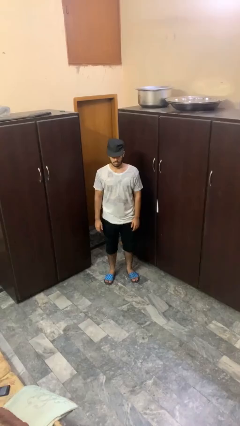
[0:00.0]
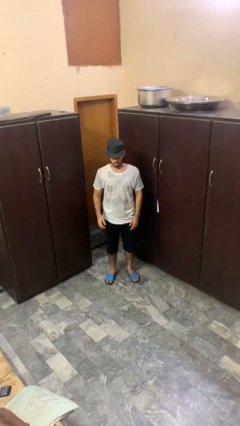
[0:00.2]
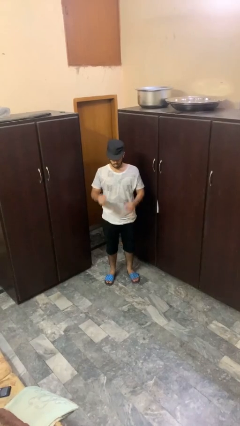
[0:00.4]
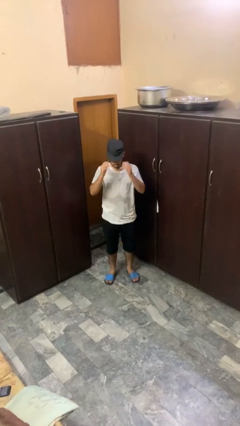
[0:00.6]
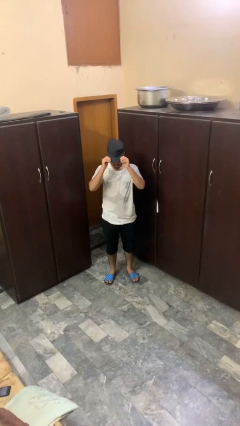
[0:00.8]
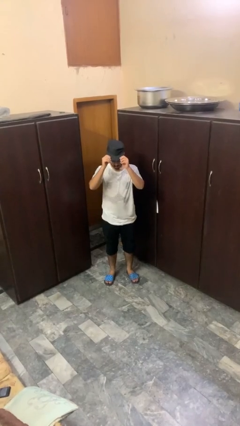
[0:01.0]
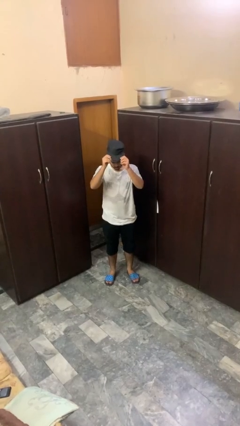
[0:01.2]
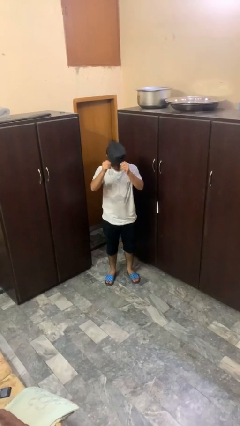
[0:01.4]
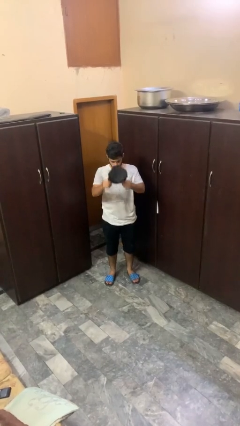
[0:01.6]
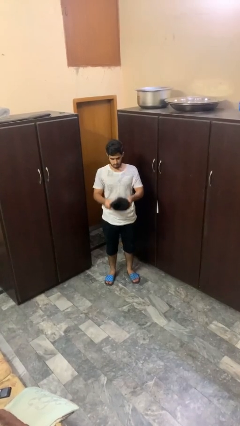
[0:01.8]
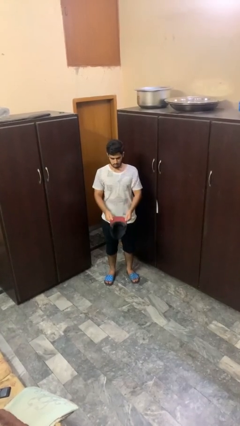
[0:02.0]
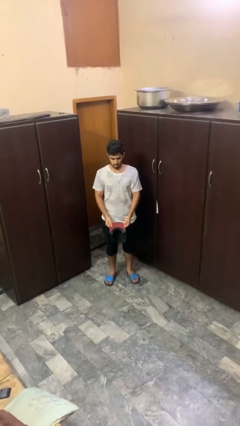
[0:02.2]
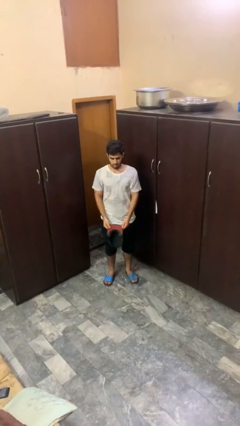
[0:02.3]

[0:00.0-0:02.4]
person takes off hat

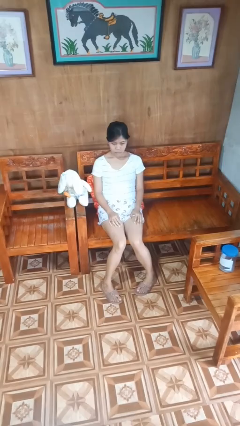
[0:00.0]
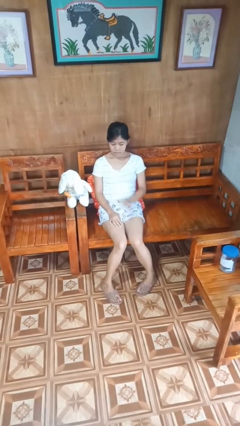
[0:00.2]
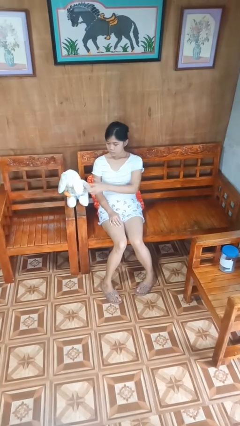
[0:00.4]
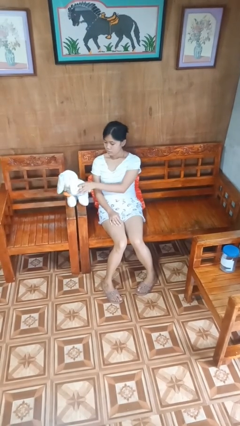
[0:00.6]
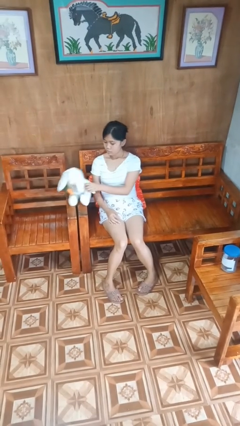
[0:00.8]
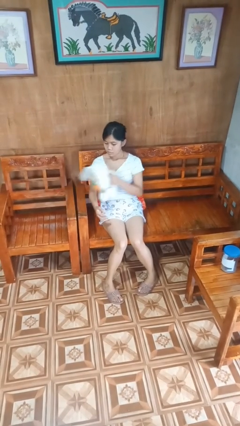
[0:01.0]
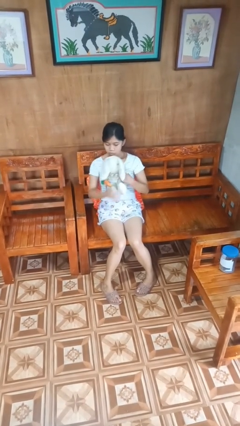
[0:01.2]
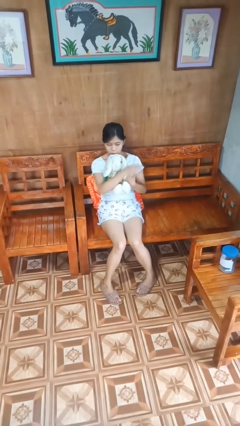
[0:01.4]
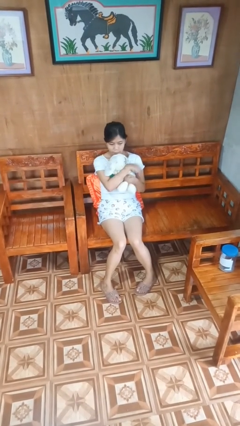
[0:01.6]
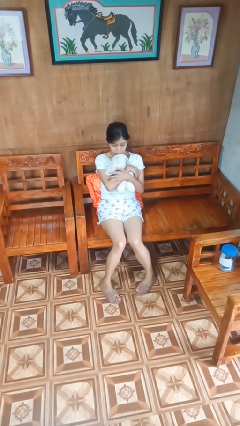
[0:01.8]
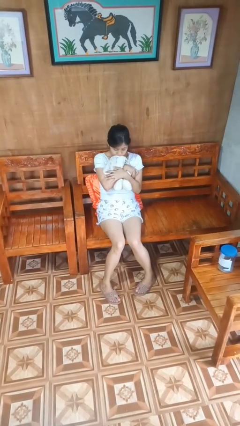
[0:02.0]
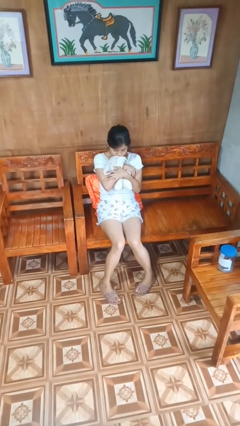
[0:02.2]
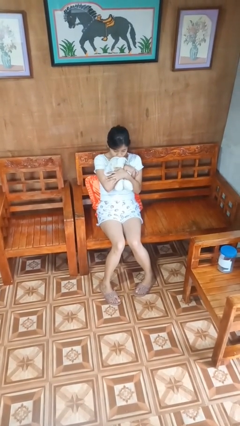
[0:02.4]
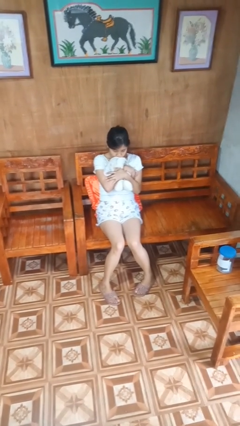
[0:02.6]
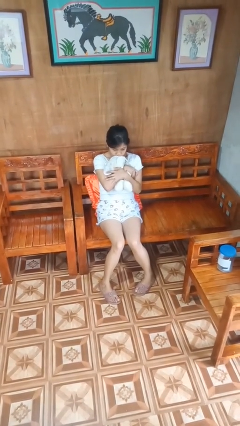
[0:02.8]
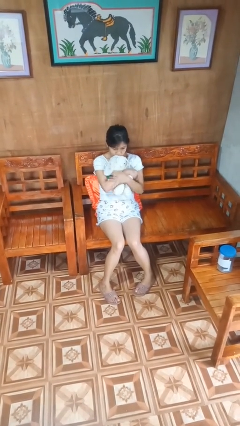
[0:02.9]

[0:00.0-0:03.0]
person hugs stuffed animal

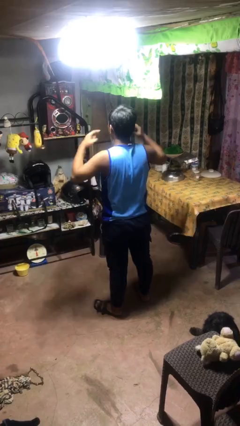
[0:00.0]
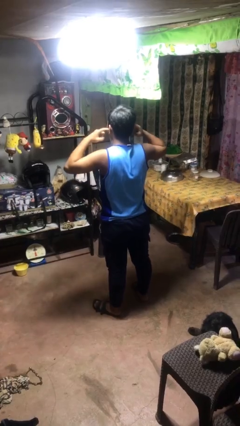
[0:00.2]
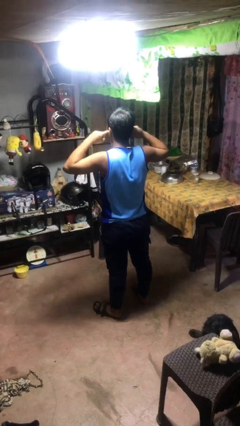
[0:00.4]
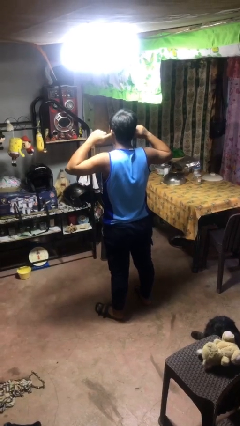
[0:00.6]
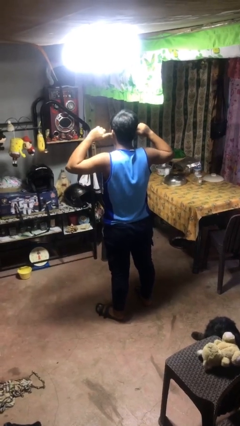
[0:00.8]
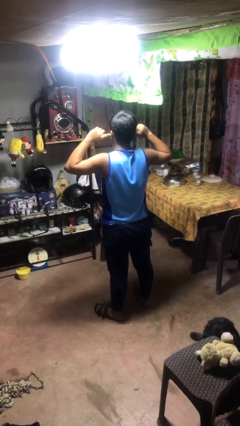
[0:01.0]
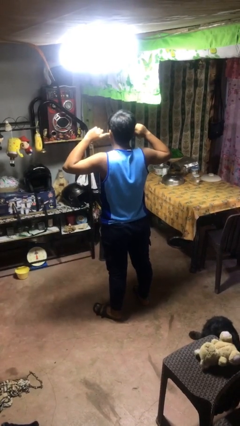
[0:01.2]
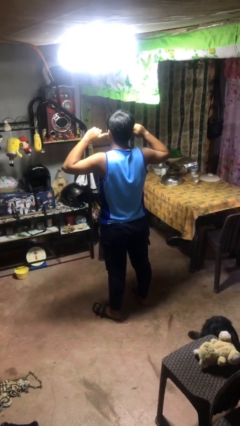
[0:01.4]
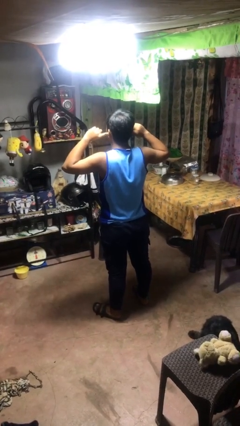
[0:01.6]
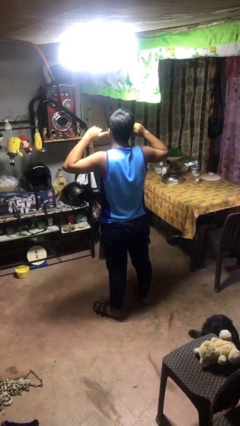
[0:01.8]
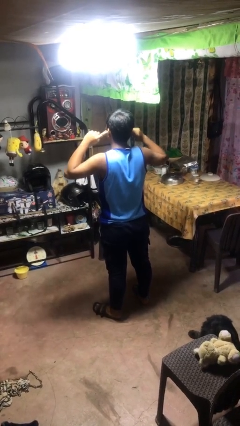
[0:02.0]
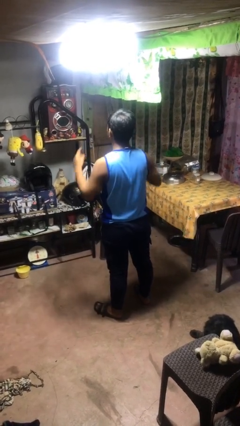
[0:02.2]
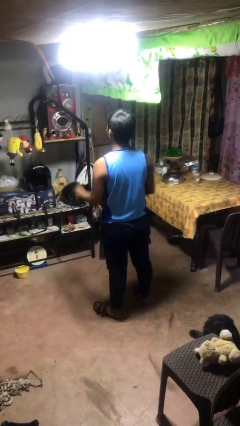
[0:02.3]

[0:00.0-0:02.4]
person puts fingers in ear

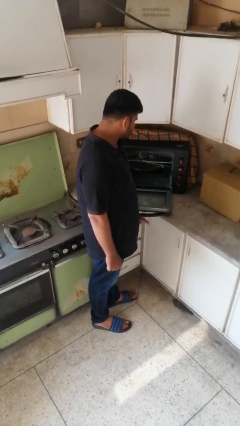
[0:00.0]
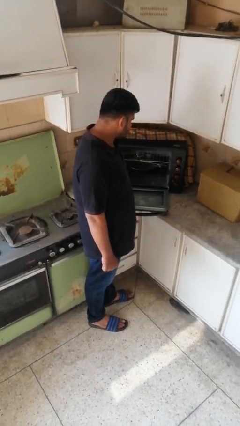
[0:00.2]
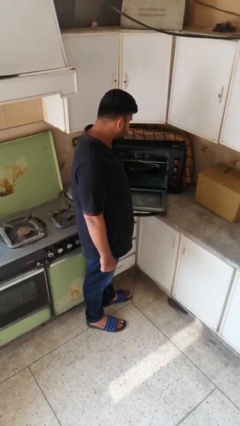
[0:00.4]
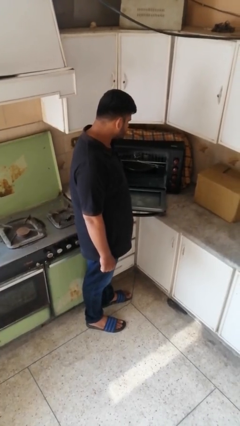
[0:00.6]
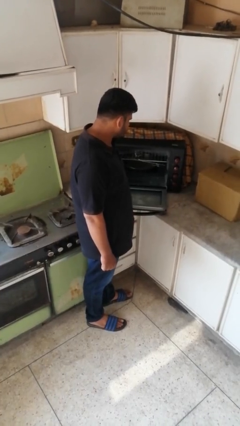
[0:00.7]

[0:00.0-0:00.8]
person closes oven door

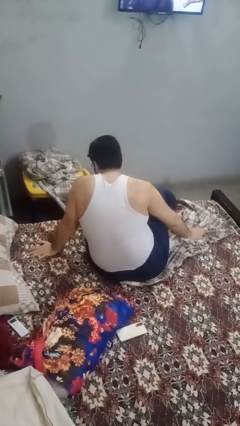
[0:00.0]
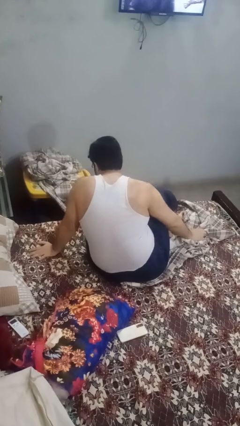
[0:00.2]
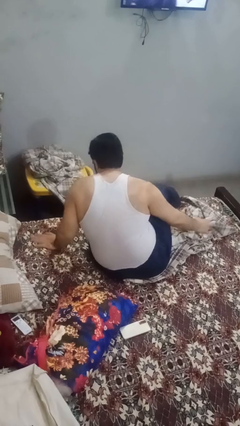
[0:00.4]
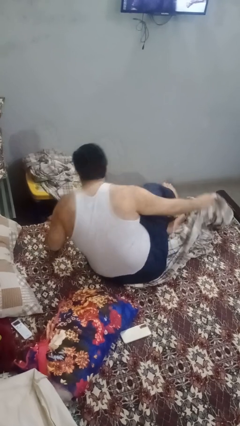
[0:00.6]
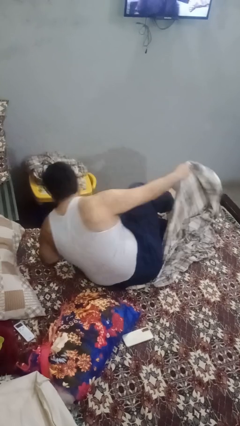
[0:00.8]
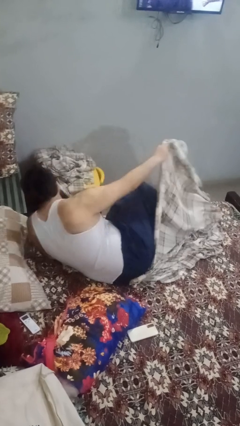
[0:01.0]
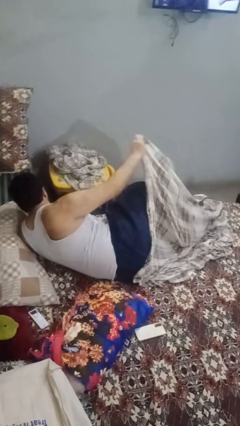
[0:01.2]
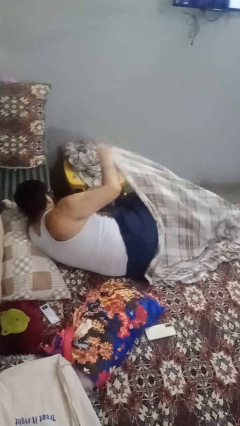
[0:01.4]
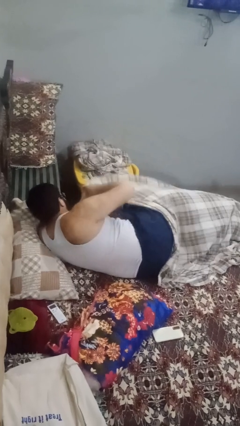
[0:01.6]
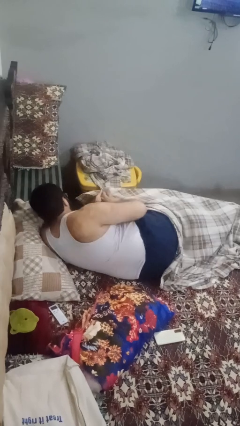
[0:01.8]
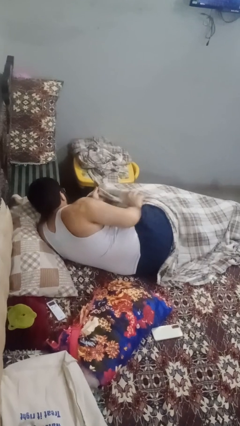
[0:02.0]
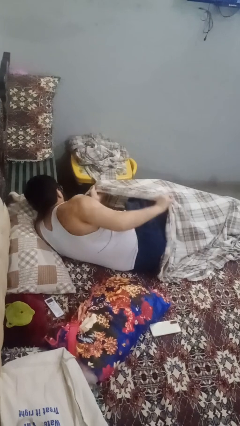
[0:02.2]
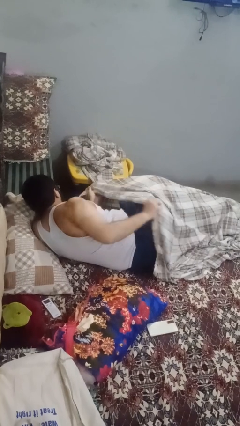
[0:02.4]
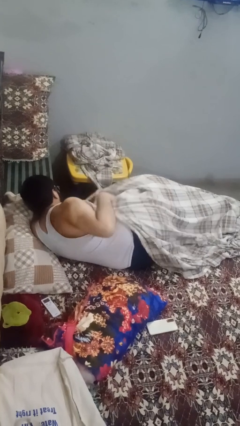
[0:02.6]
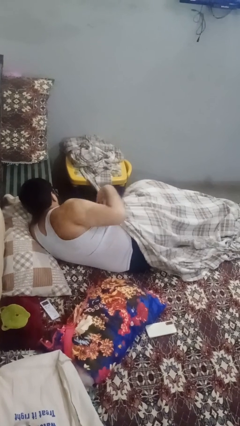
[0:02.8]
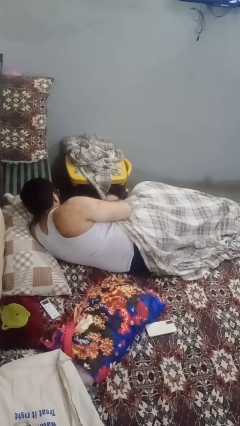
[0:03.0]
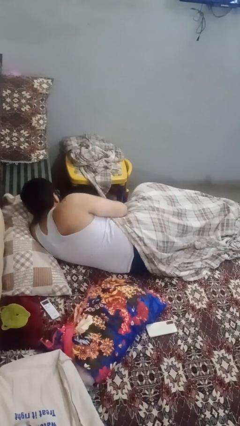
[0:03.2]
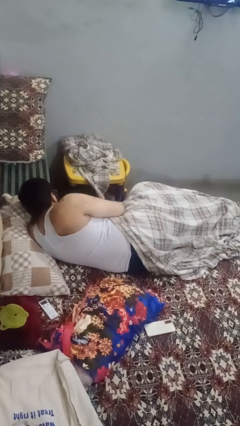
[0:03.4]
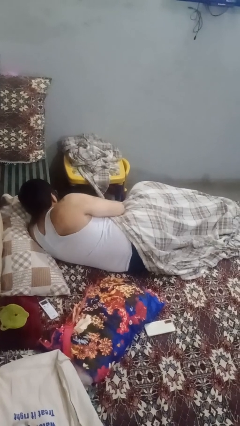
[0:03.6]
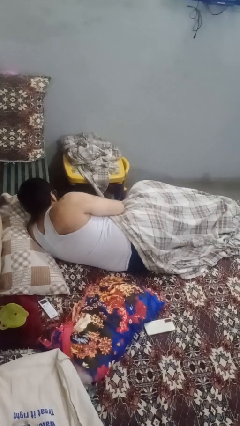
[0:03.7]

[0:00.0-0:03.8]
person covers with blanket

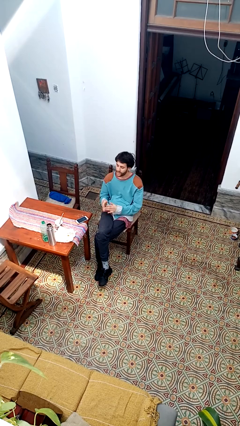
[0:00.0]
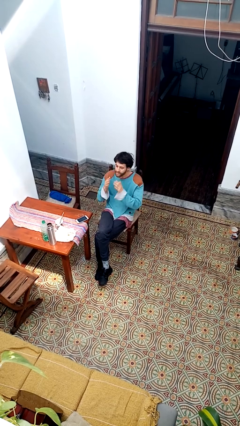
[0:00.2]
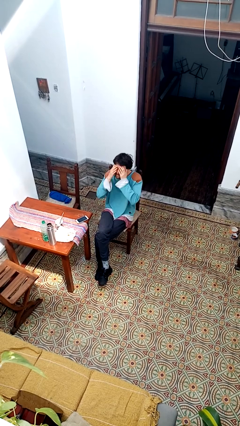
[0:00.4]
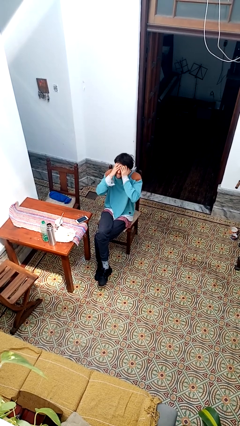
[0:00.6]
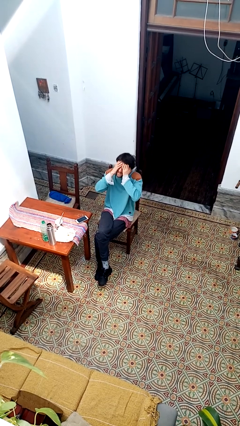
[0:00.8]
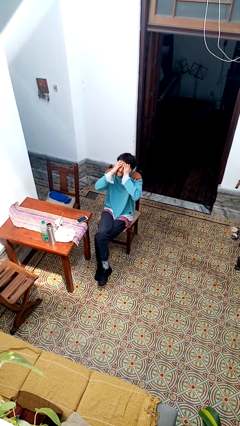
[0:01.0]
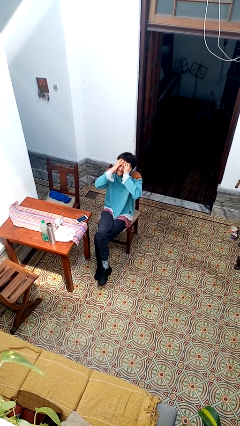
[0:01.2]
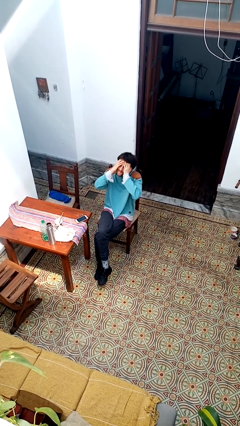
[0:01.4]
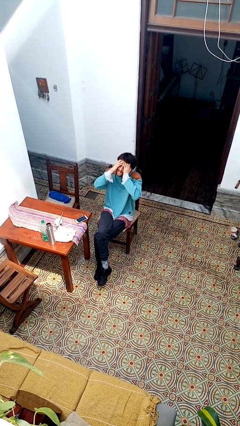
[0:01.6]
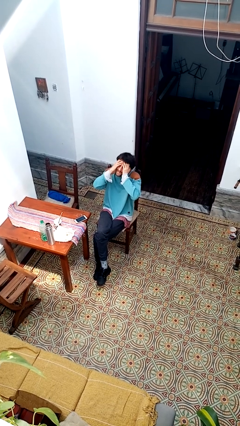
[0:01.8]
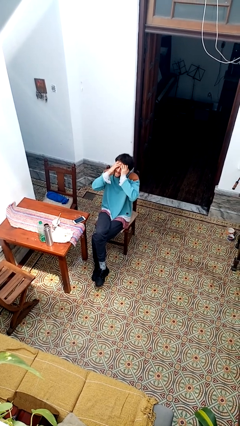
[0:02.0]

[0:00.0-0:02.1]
person covers face with hands

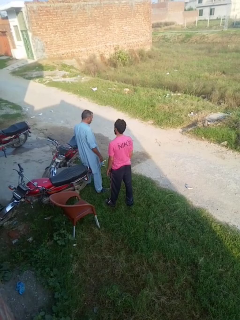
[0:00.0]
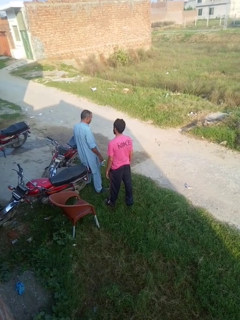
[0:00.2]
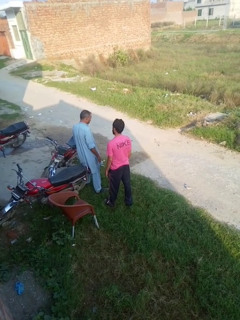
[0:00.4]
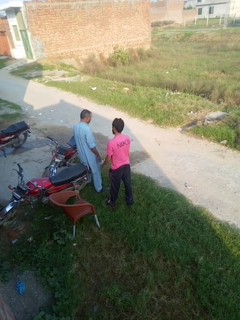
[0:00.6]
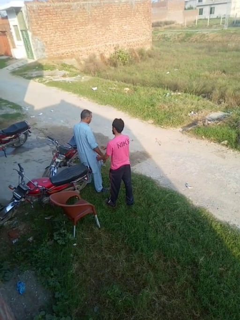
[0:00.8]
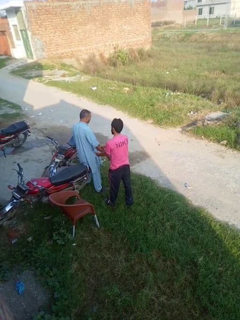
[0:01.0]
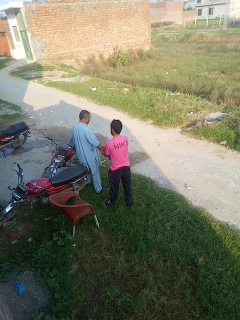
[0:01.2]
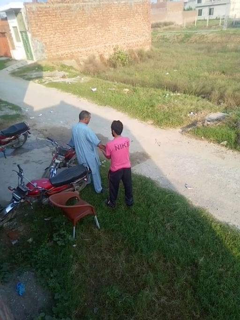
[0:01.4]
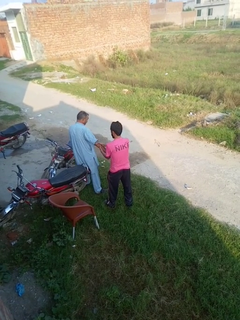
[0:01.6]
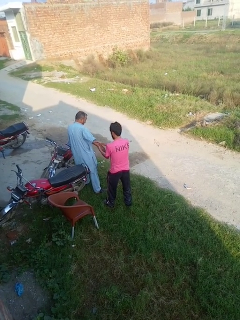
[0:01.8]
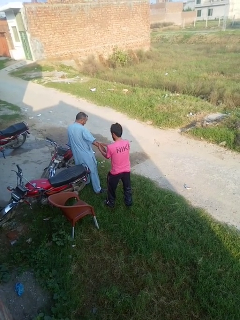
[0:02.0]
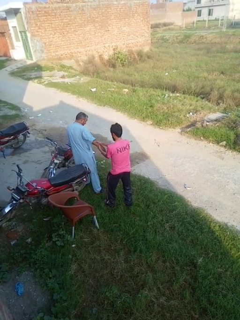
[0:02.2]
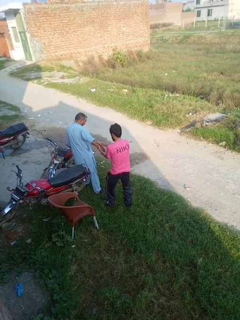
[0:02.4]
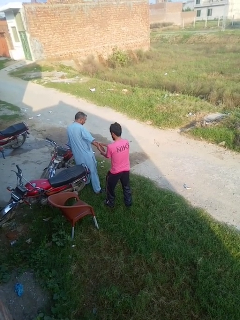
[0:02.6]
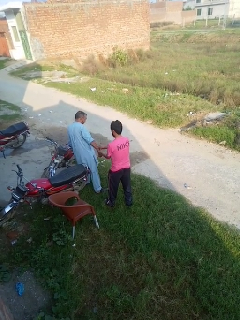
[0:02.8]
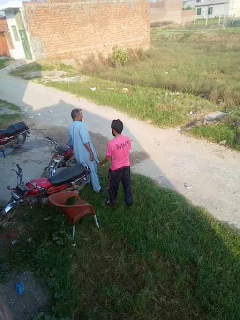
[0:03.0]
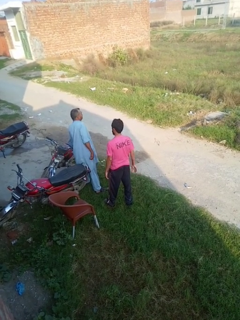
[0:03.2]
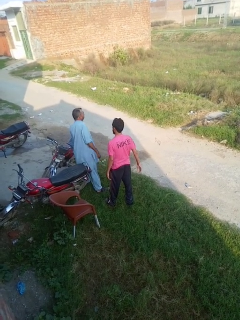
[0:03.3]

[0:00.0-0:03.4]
person grabs person by forearm
